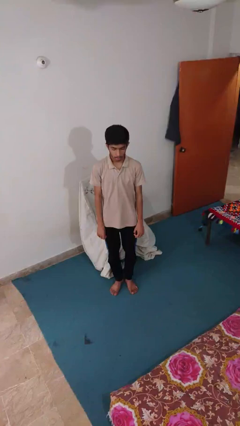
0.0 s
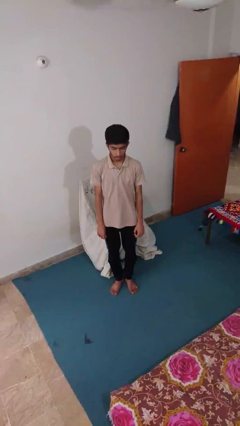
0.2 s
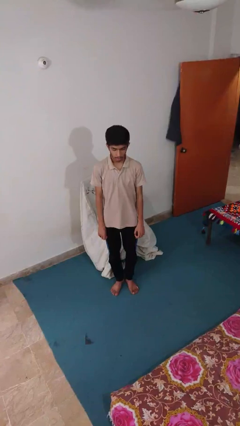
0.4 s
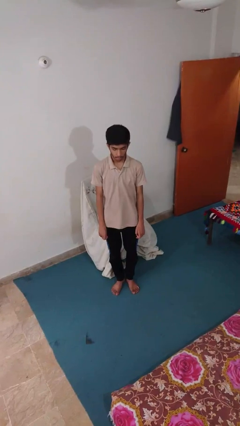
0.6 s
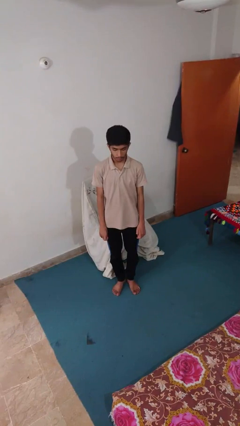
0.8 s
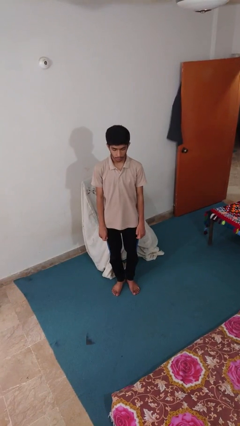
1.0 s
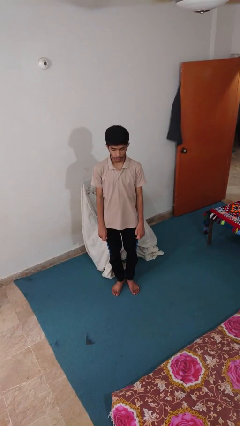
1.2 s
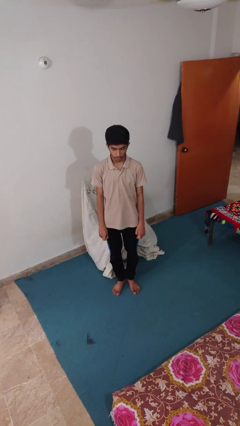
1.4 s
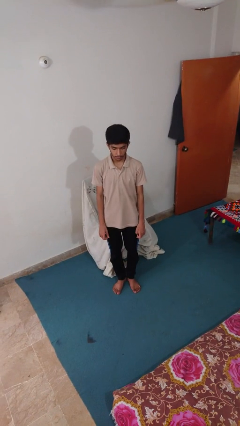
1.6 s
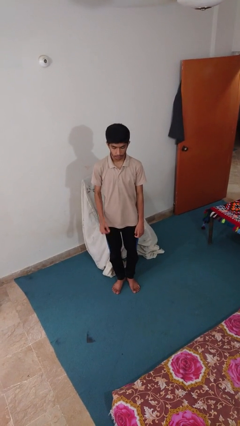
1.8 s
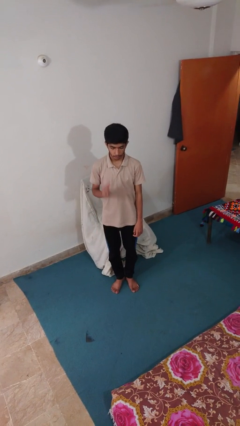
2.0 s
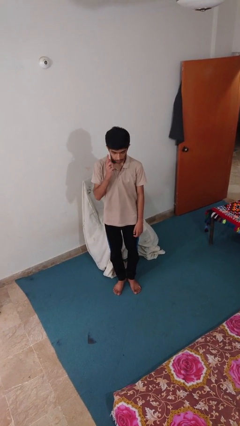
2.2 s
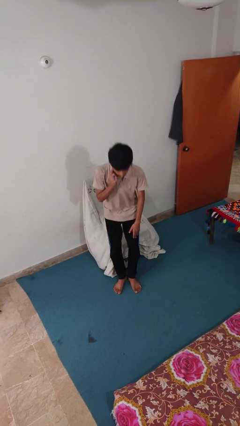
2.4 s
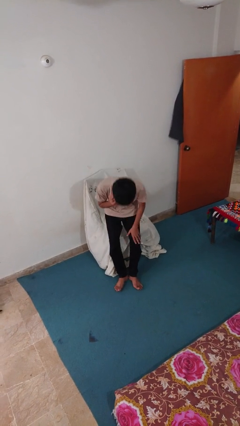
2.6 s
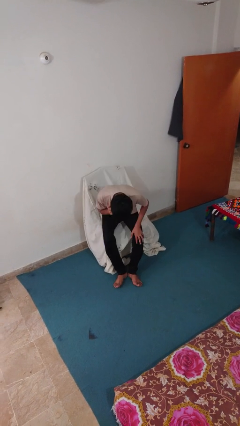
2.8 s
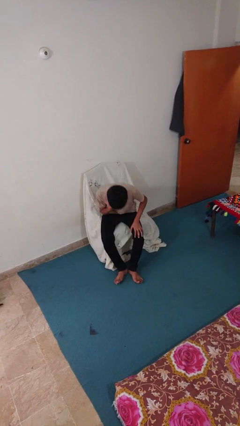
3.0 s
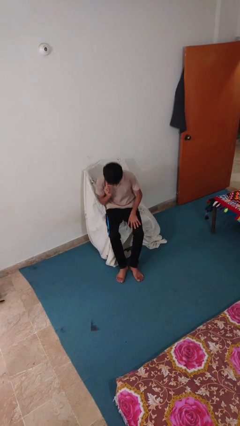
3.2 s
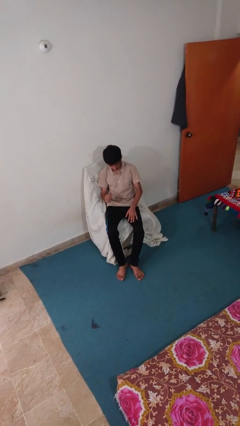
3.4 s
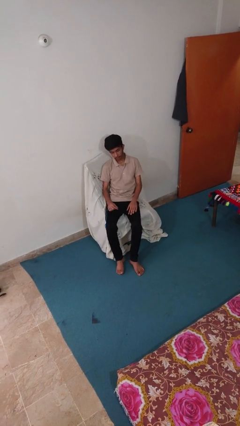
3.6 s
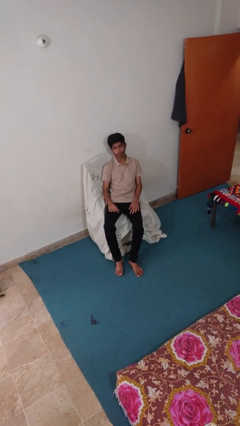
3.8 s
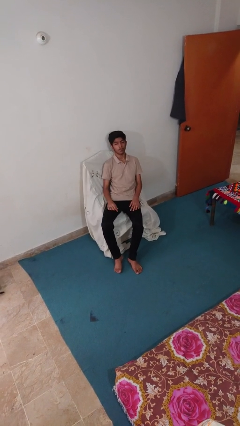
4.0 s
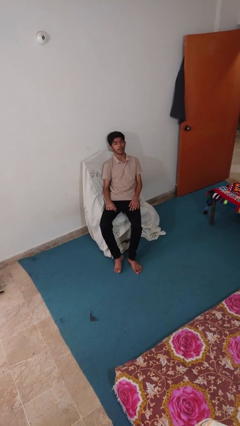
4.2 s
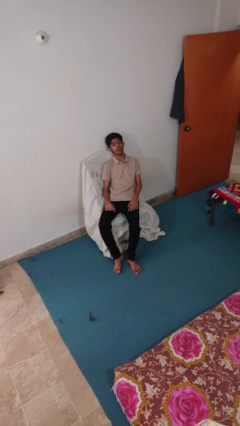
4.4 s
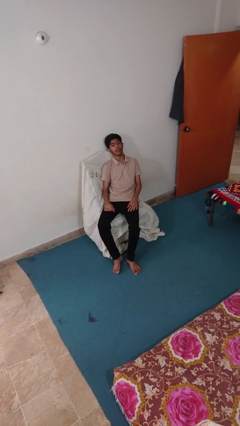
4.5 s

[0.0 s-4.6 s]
person lies down on couch

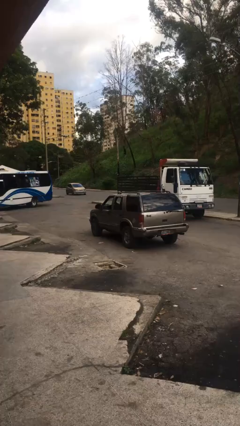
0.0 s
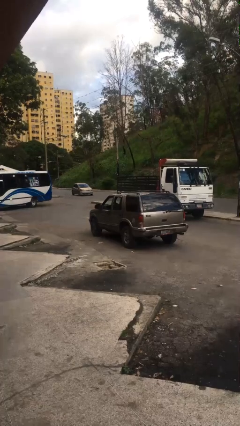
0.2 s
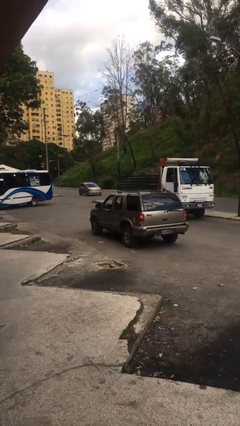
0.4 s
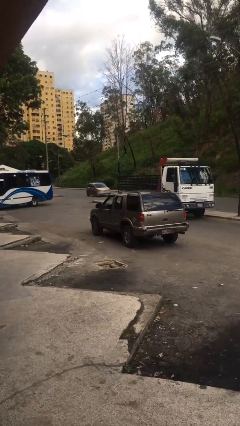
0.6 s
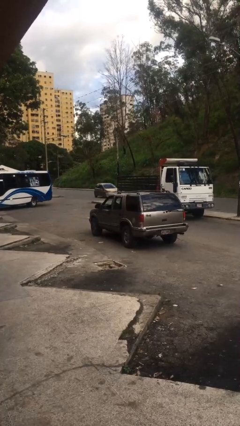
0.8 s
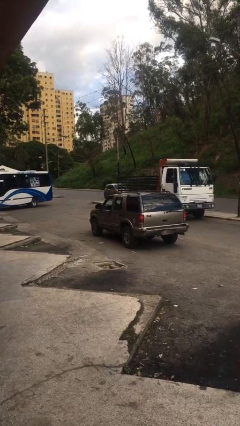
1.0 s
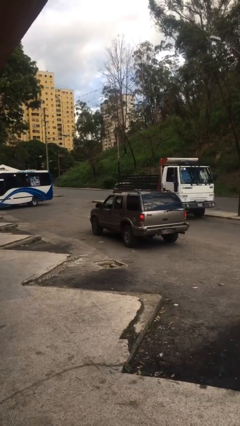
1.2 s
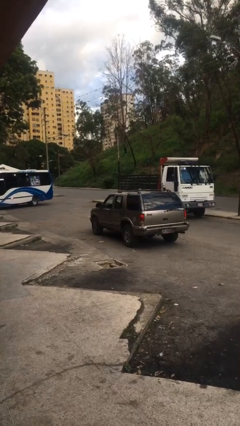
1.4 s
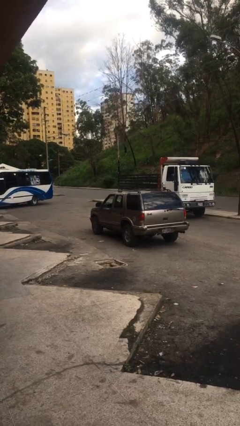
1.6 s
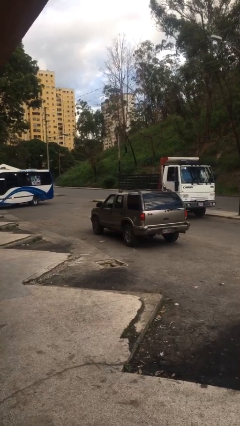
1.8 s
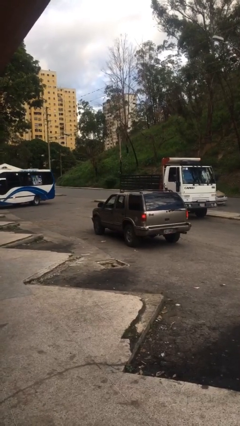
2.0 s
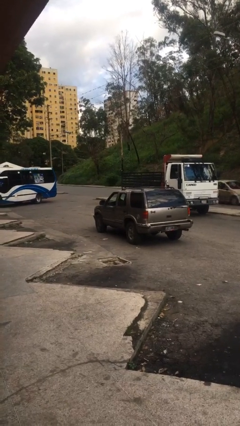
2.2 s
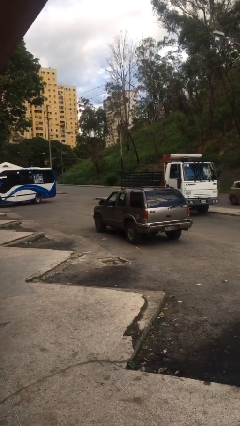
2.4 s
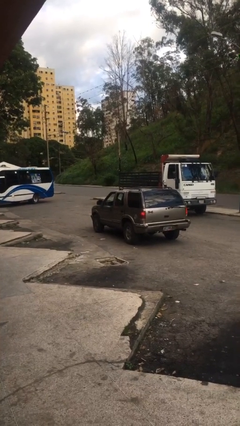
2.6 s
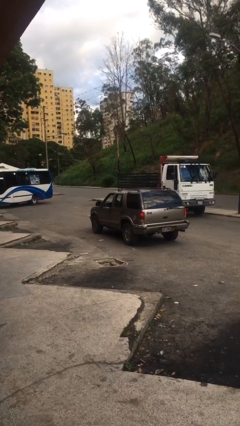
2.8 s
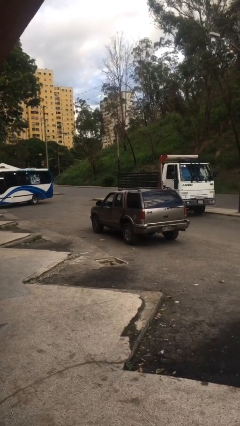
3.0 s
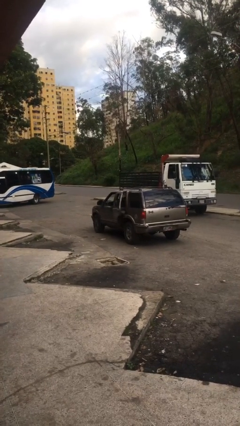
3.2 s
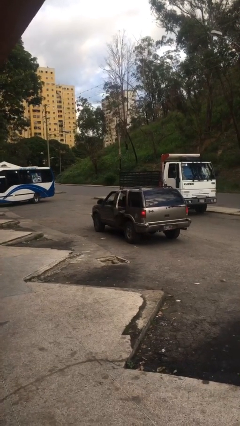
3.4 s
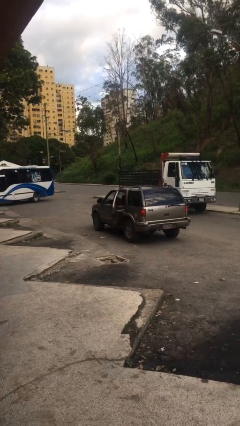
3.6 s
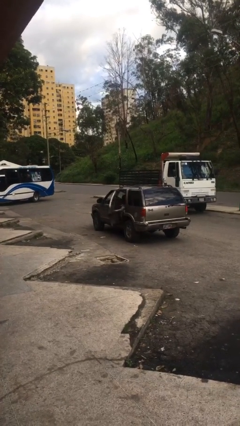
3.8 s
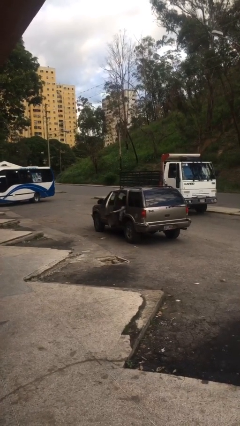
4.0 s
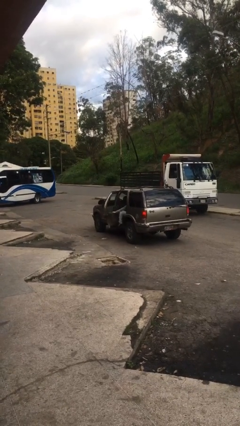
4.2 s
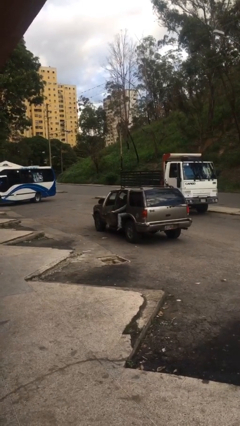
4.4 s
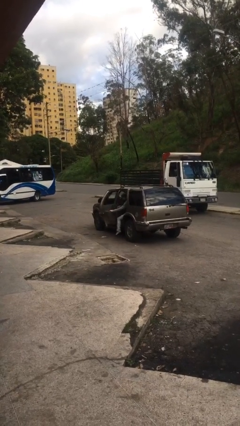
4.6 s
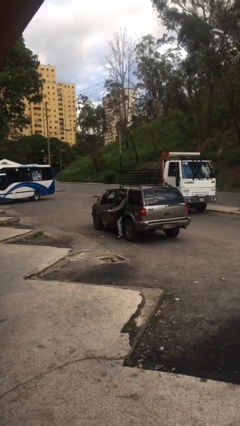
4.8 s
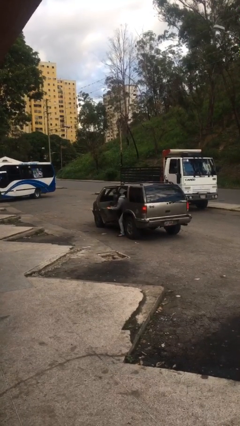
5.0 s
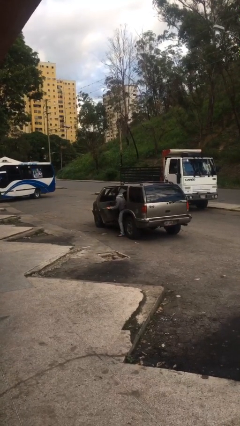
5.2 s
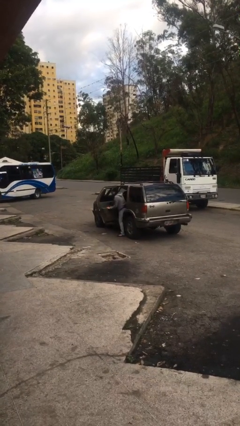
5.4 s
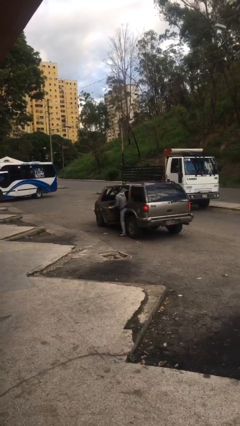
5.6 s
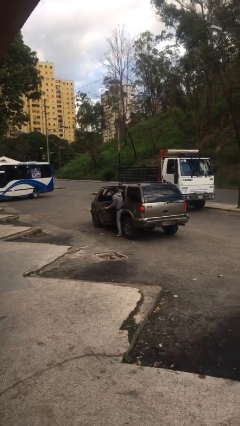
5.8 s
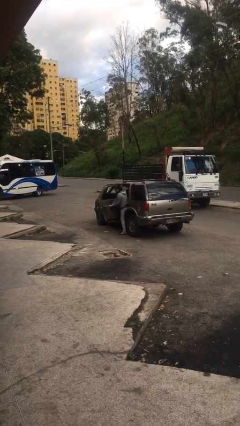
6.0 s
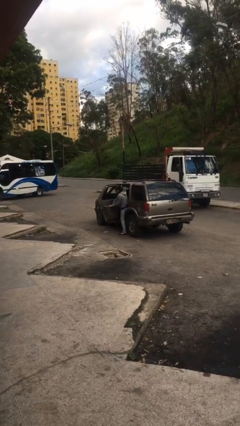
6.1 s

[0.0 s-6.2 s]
person opens car door

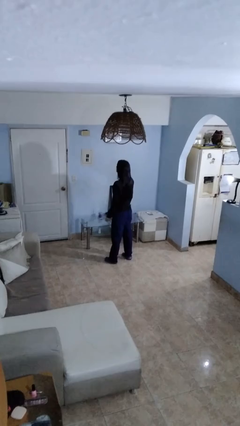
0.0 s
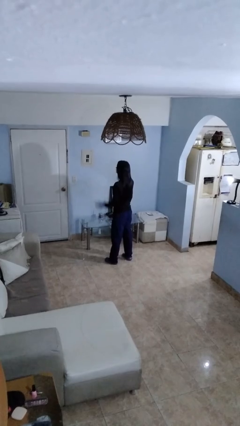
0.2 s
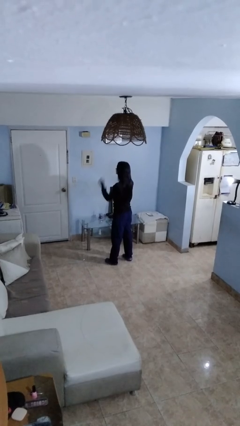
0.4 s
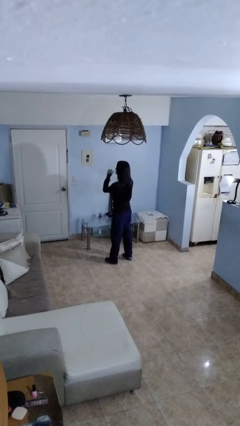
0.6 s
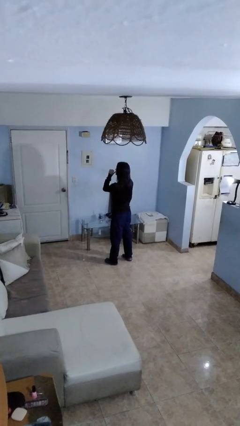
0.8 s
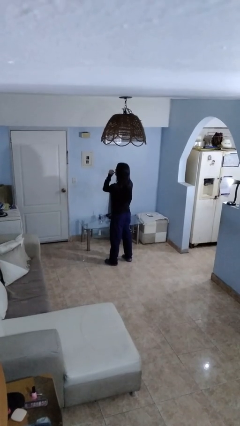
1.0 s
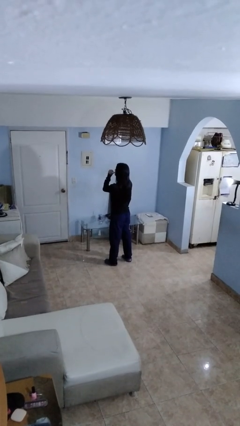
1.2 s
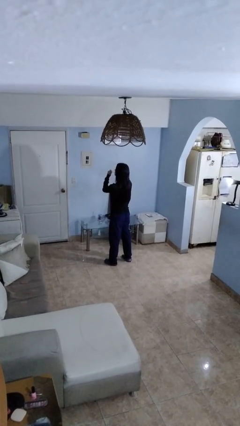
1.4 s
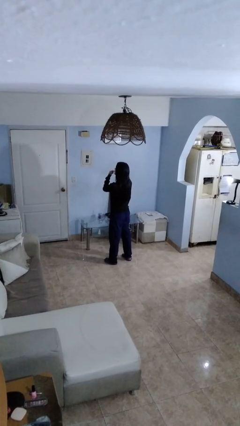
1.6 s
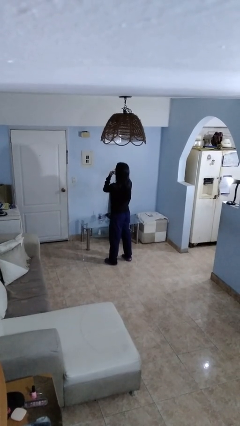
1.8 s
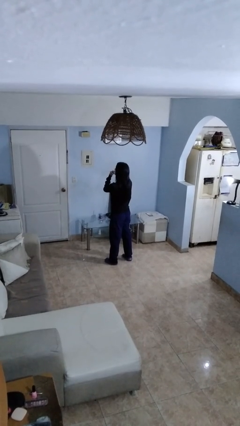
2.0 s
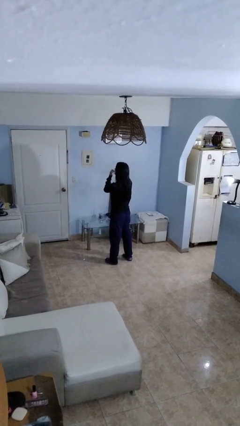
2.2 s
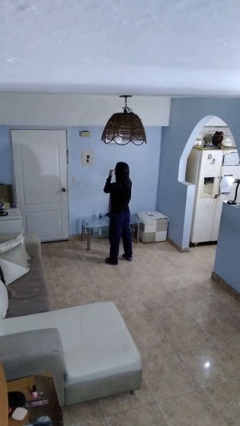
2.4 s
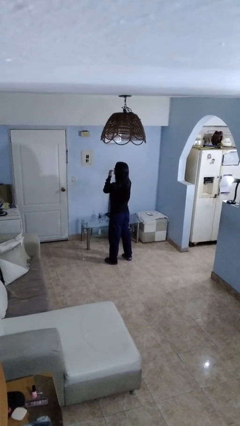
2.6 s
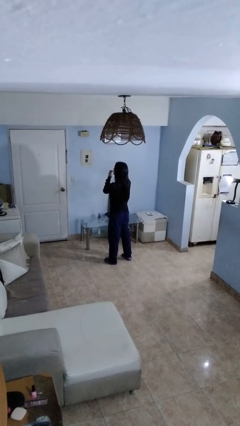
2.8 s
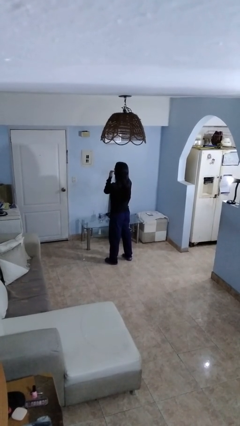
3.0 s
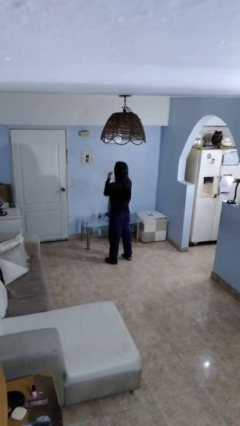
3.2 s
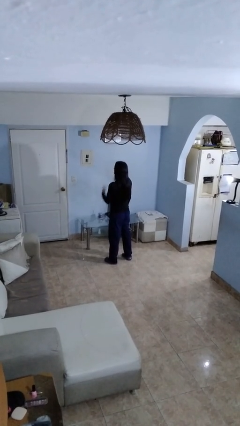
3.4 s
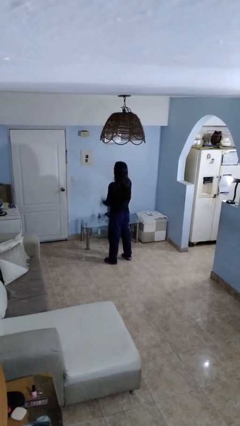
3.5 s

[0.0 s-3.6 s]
person licks fingers

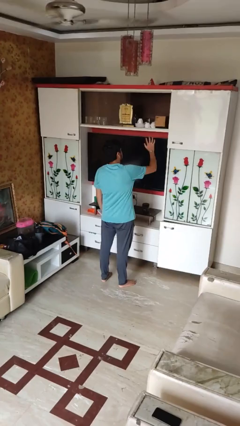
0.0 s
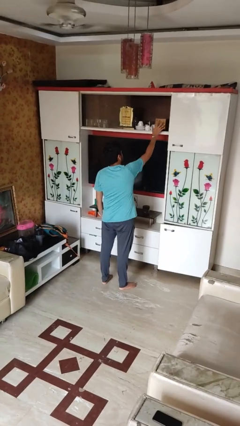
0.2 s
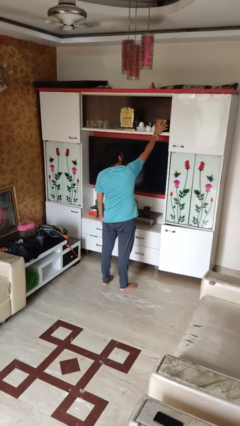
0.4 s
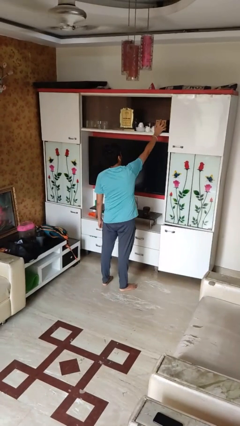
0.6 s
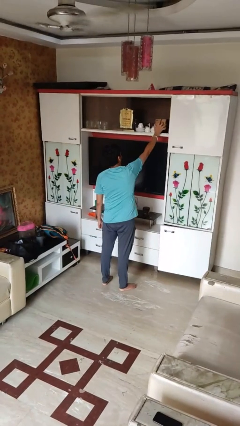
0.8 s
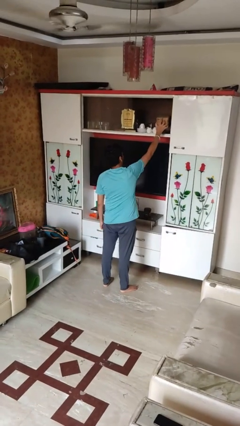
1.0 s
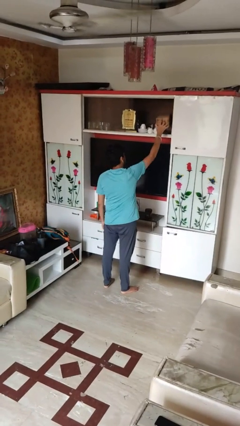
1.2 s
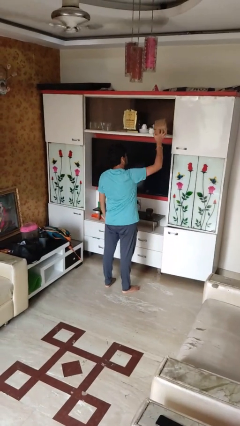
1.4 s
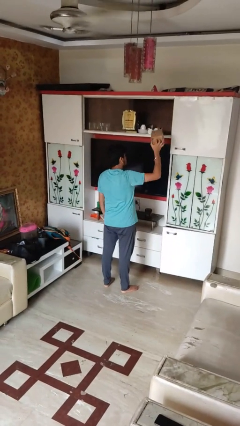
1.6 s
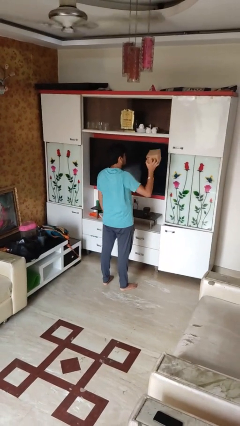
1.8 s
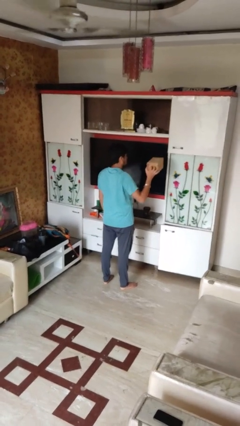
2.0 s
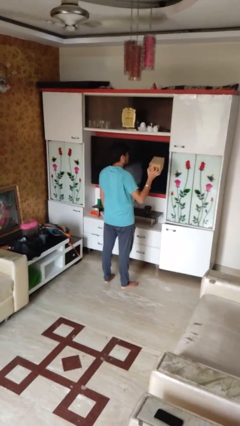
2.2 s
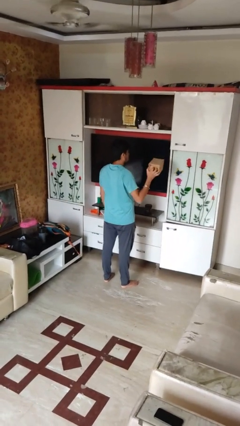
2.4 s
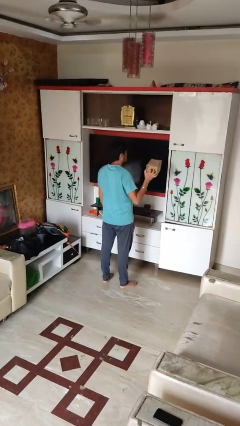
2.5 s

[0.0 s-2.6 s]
person picks up object from shelf

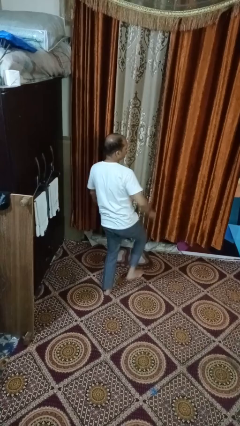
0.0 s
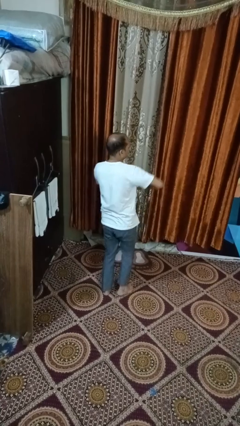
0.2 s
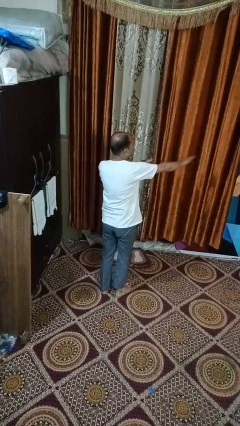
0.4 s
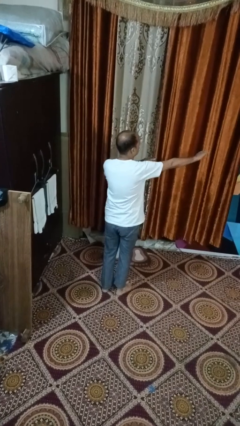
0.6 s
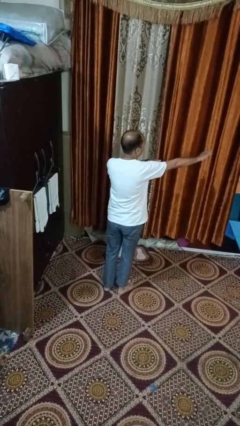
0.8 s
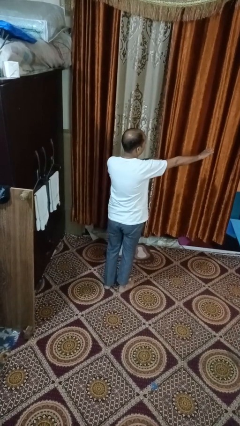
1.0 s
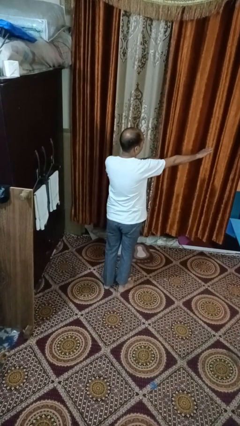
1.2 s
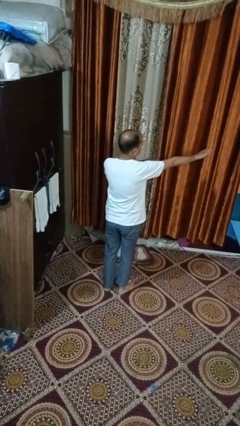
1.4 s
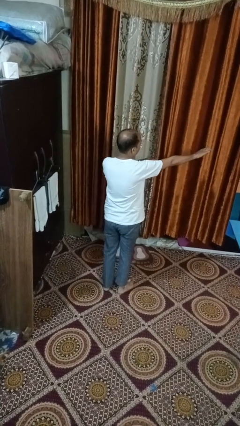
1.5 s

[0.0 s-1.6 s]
person karate chop
